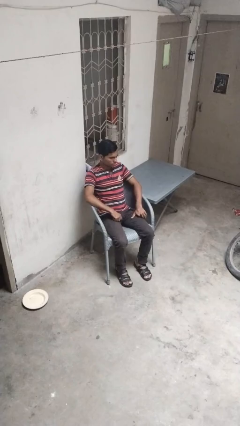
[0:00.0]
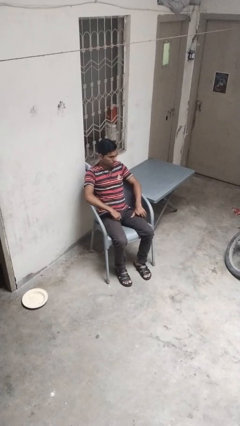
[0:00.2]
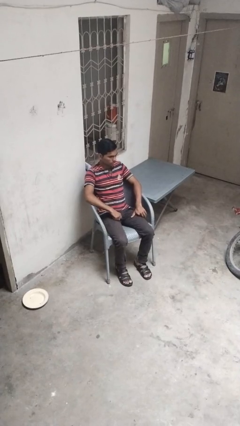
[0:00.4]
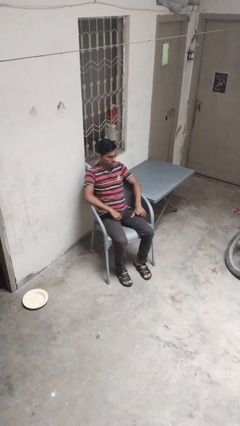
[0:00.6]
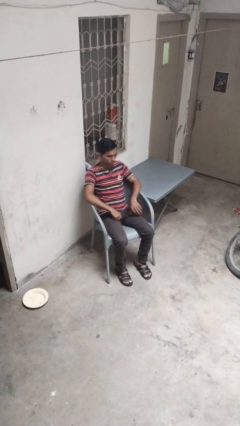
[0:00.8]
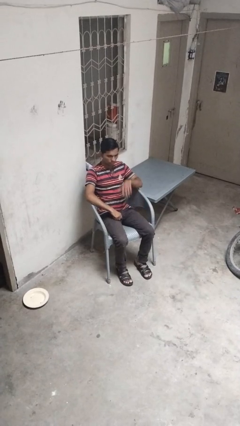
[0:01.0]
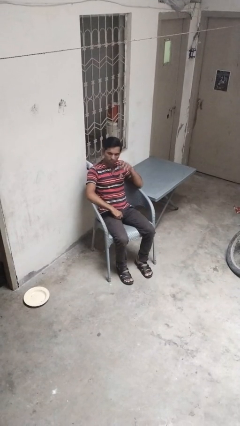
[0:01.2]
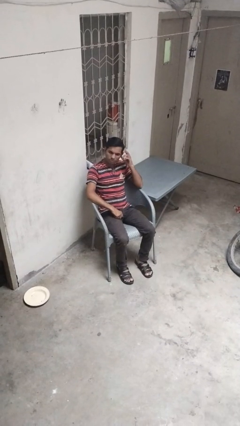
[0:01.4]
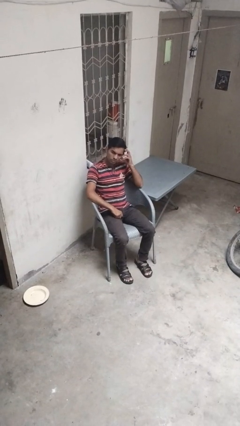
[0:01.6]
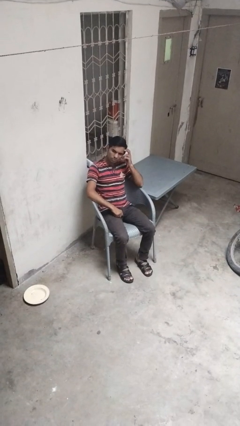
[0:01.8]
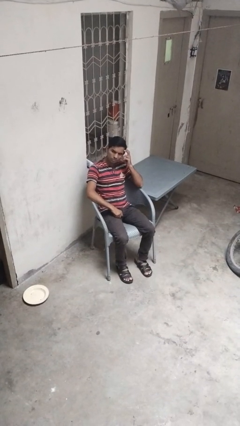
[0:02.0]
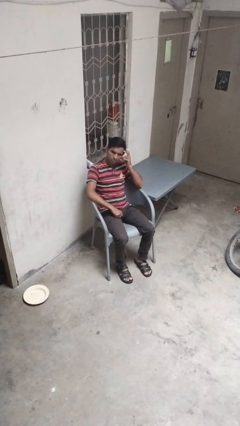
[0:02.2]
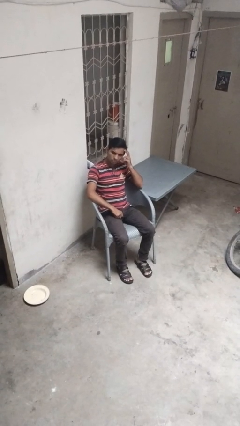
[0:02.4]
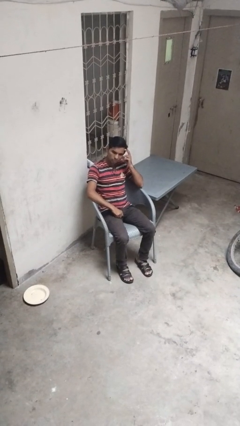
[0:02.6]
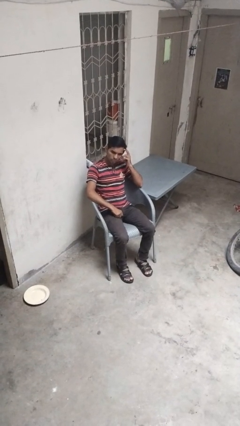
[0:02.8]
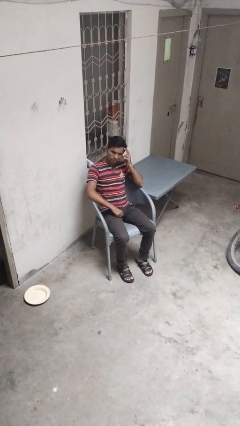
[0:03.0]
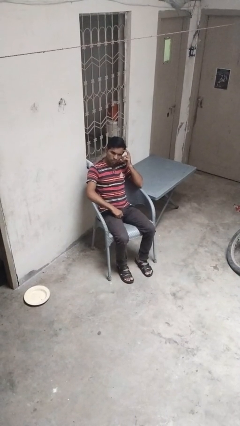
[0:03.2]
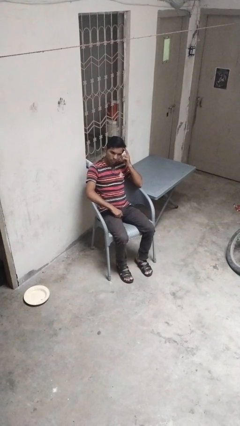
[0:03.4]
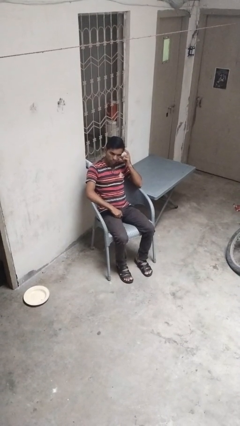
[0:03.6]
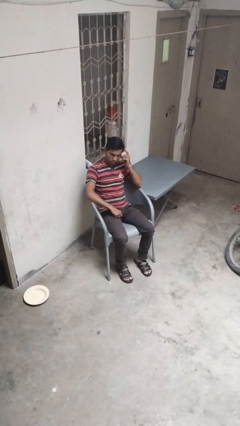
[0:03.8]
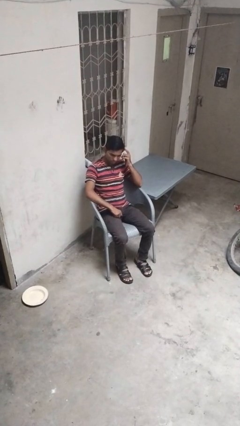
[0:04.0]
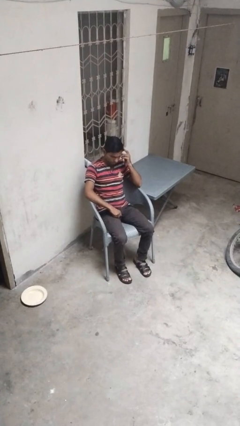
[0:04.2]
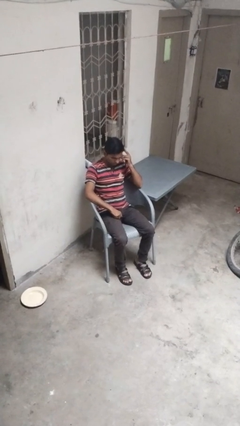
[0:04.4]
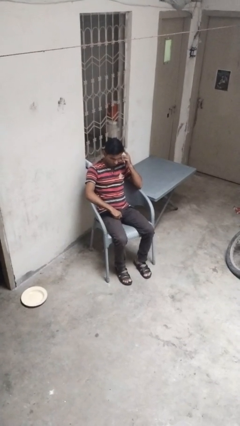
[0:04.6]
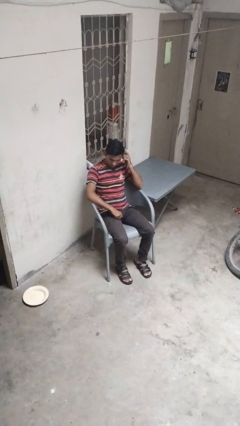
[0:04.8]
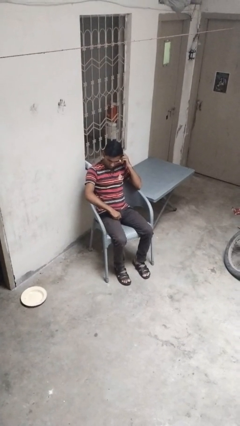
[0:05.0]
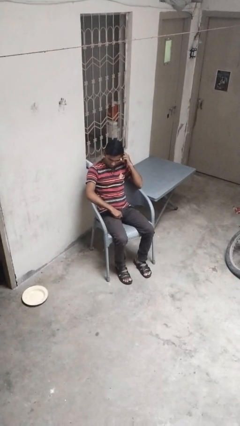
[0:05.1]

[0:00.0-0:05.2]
person strokes hair

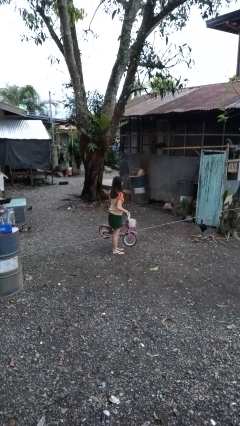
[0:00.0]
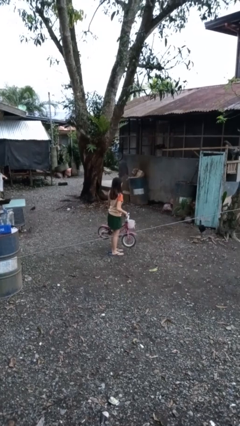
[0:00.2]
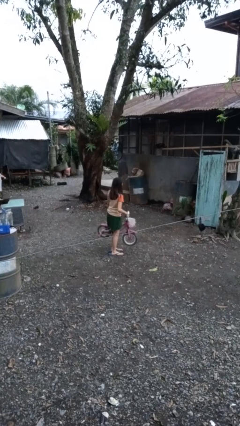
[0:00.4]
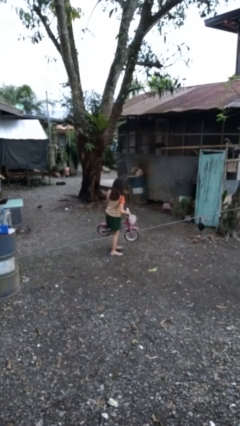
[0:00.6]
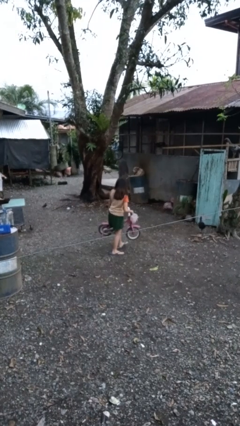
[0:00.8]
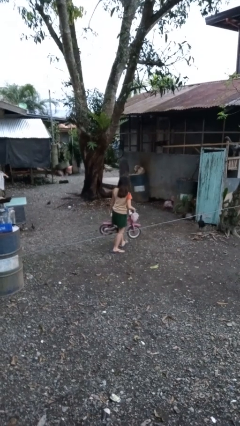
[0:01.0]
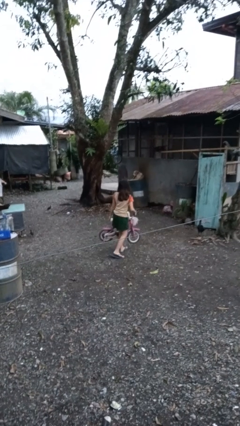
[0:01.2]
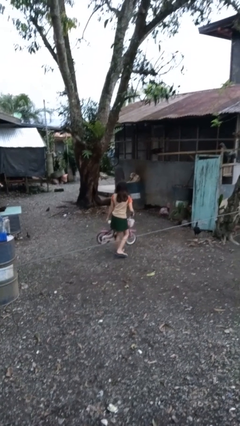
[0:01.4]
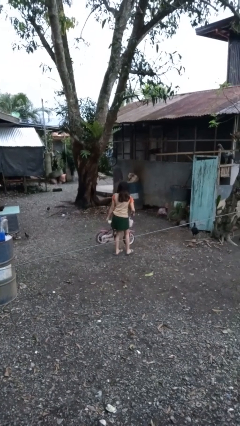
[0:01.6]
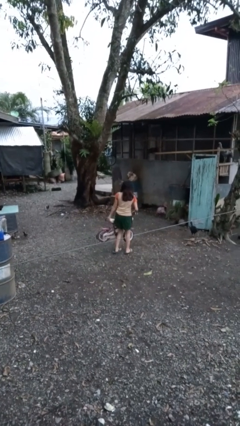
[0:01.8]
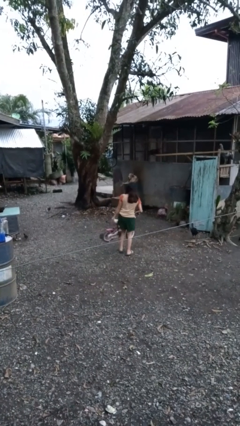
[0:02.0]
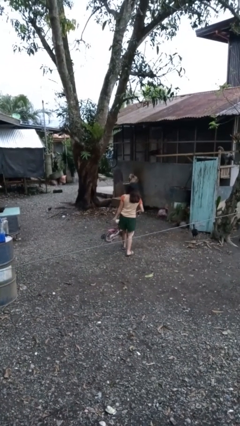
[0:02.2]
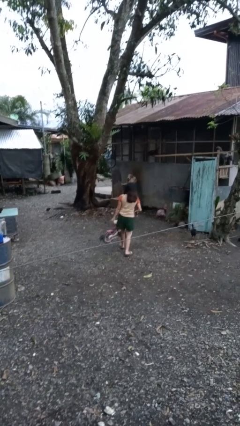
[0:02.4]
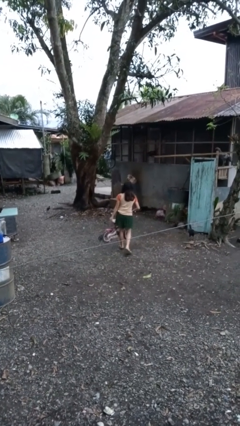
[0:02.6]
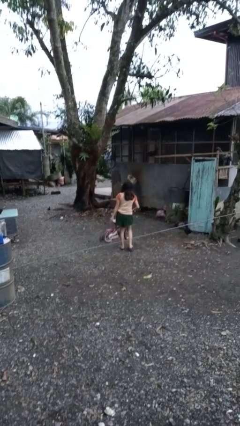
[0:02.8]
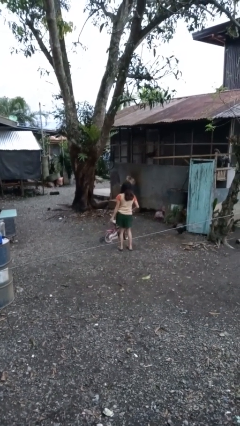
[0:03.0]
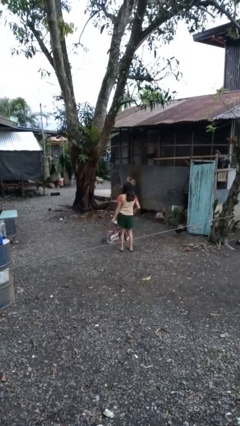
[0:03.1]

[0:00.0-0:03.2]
person carries bicycle

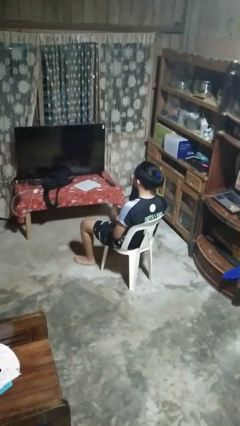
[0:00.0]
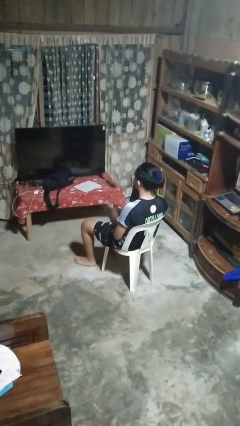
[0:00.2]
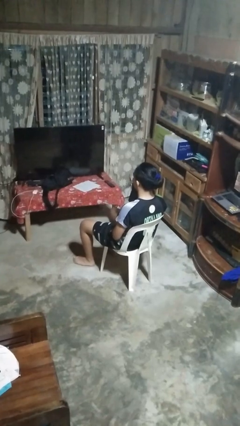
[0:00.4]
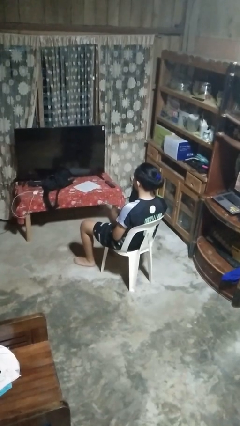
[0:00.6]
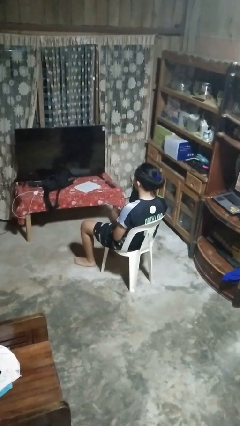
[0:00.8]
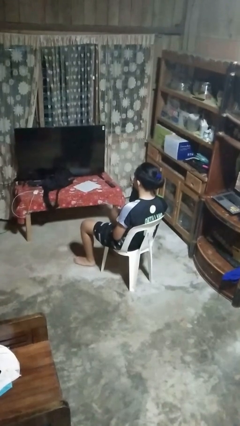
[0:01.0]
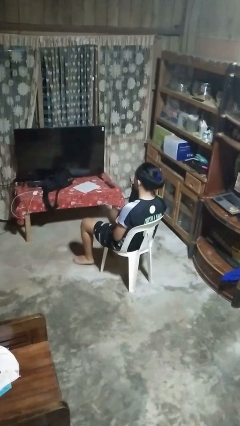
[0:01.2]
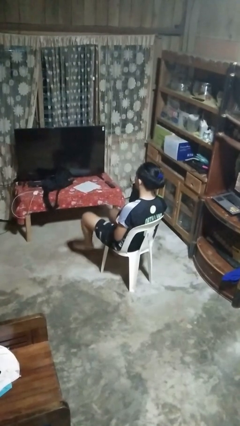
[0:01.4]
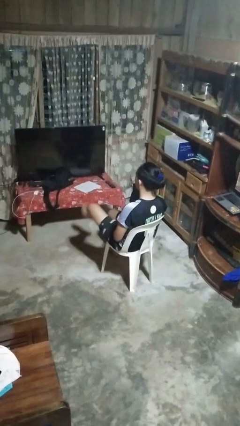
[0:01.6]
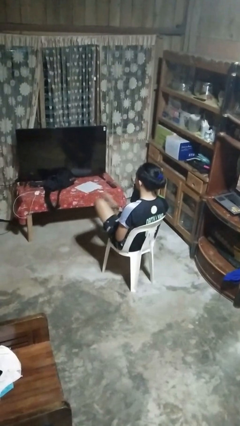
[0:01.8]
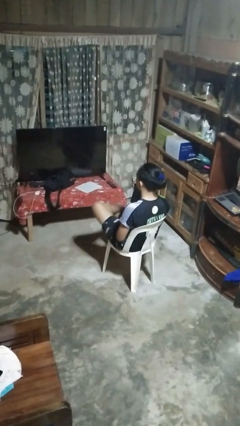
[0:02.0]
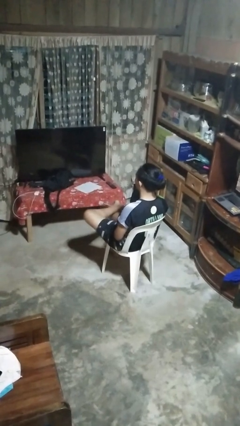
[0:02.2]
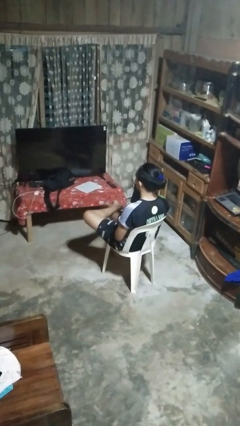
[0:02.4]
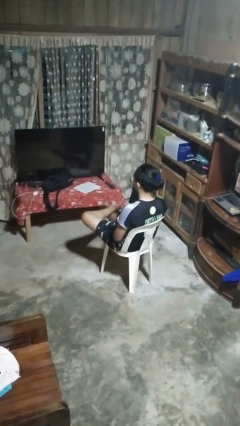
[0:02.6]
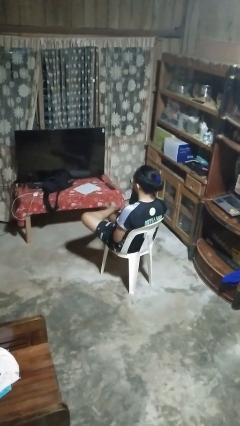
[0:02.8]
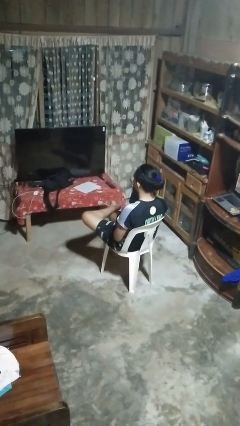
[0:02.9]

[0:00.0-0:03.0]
person crosses legs

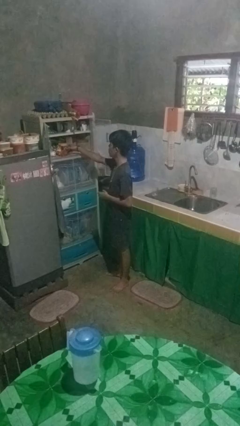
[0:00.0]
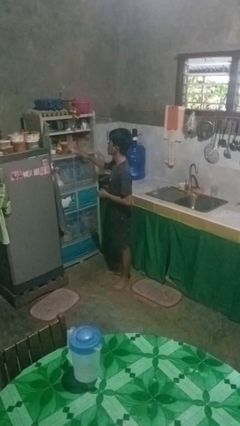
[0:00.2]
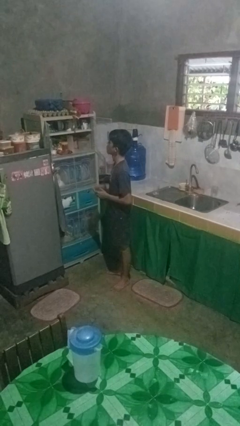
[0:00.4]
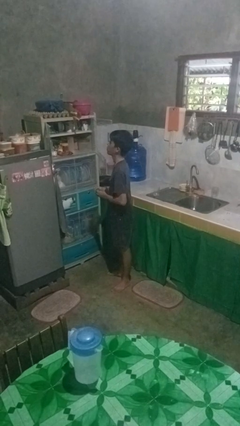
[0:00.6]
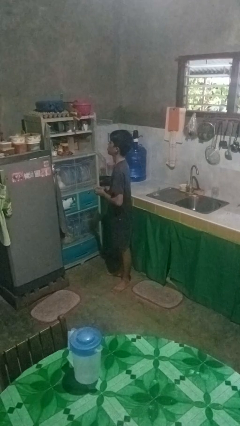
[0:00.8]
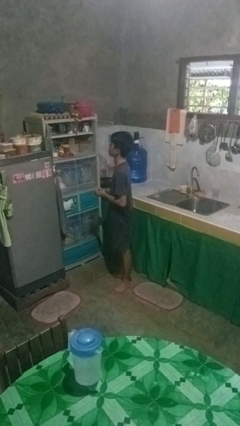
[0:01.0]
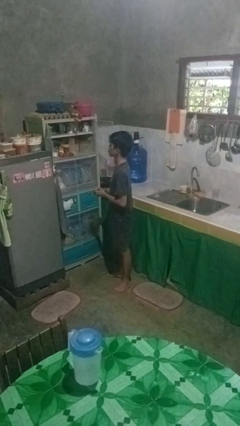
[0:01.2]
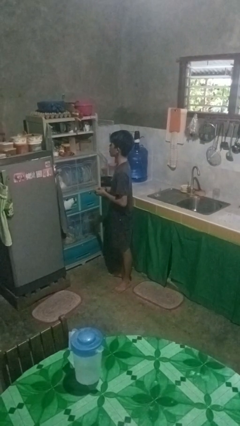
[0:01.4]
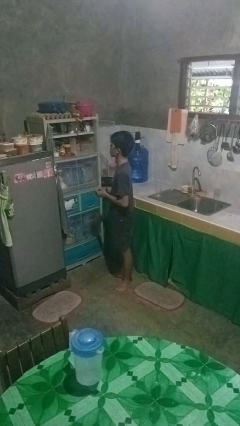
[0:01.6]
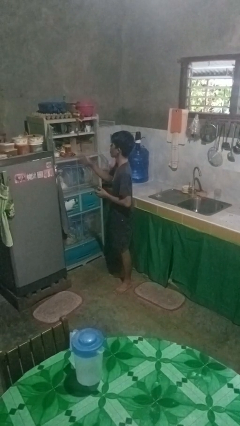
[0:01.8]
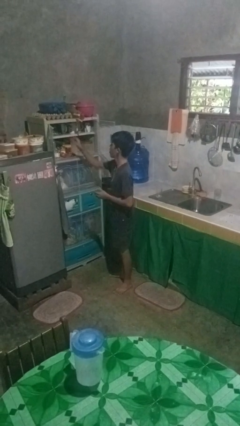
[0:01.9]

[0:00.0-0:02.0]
person puts object in cabinet

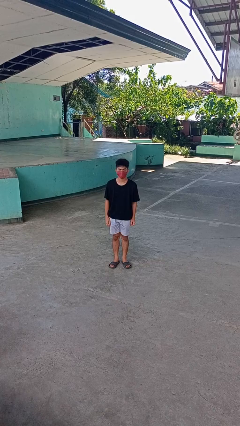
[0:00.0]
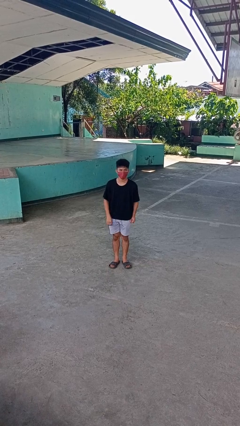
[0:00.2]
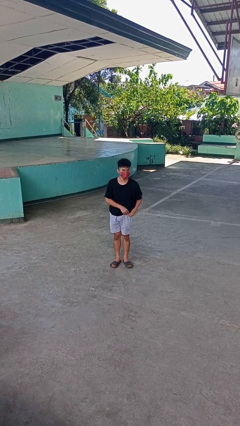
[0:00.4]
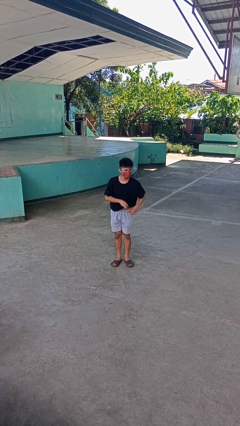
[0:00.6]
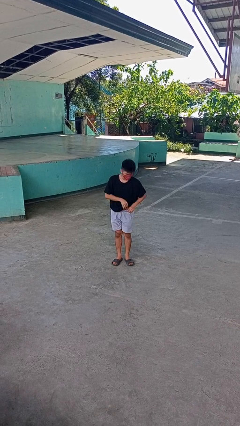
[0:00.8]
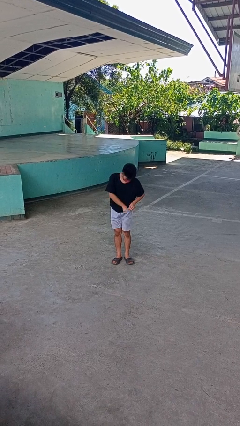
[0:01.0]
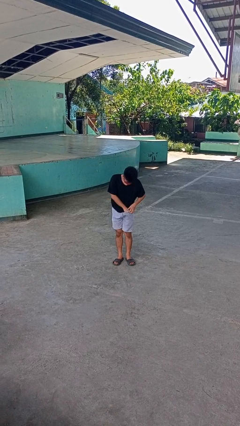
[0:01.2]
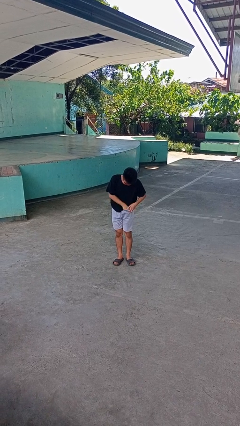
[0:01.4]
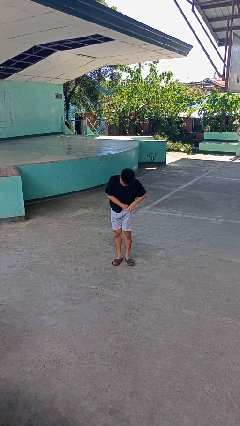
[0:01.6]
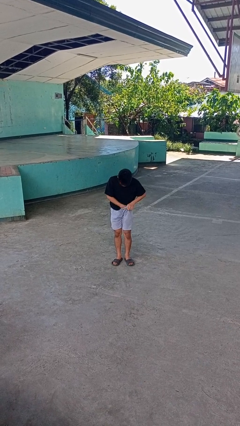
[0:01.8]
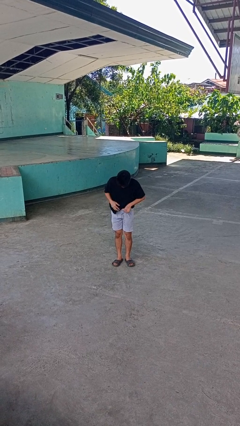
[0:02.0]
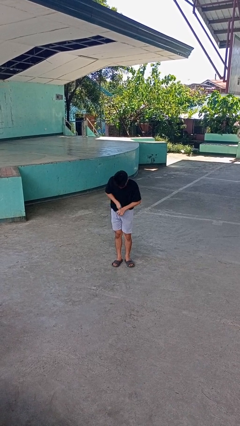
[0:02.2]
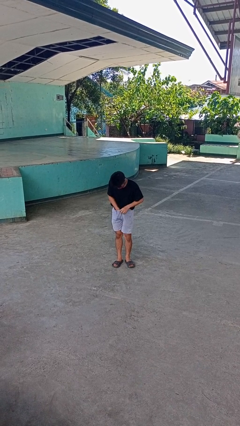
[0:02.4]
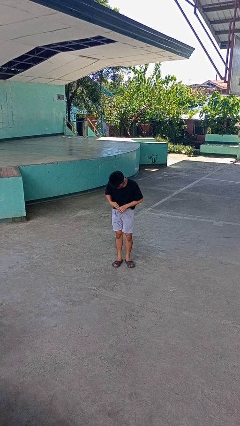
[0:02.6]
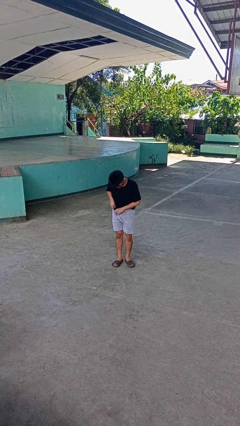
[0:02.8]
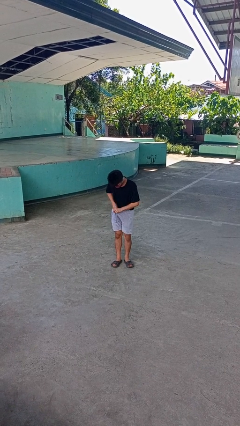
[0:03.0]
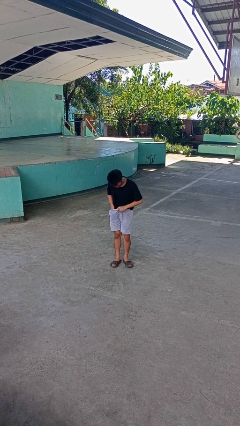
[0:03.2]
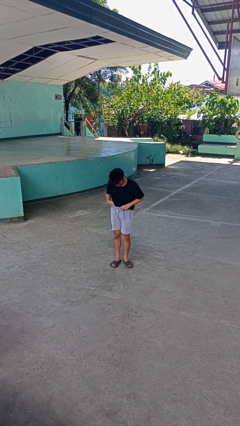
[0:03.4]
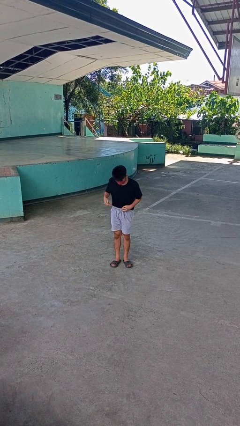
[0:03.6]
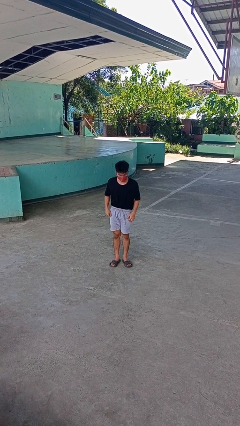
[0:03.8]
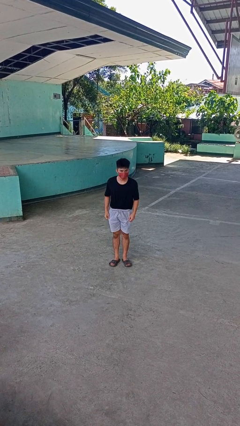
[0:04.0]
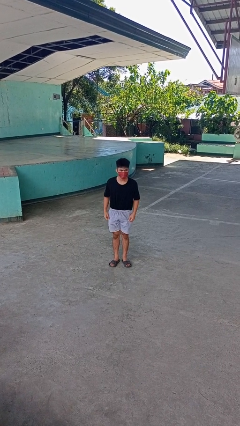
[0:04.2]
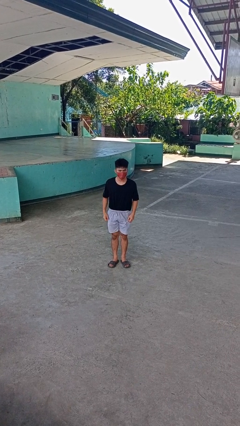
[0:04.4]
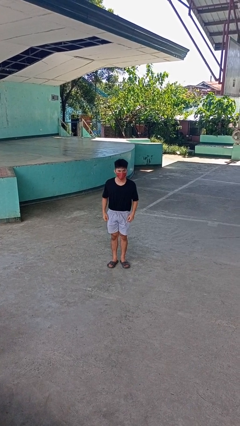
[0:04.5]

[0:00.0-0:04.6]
person tucks in shirt
